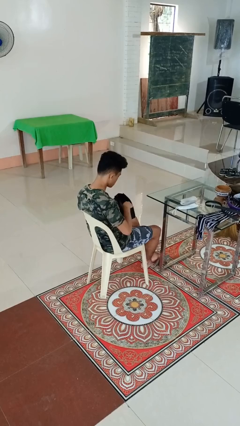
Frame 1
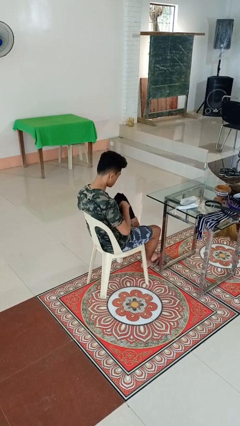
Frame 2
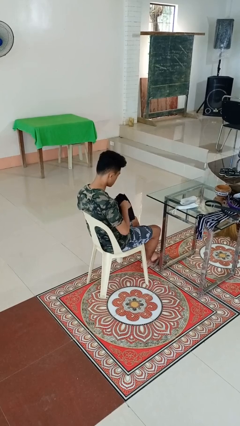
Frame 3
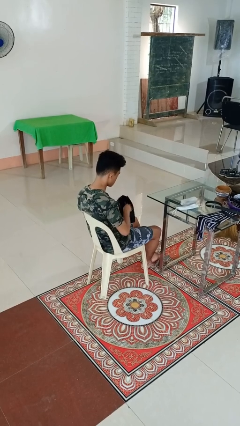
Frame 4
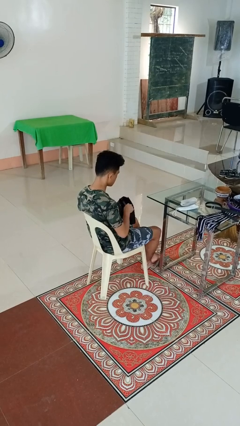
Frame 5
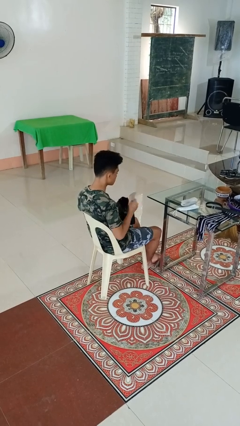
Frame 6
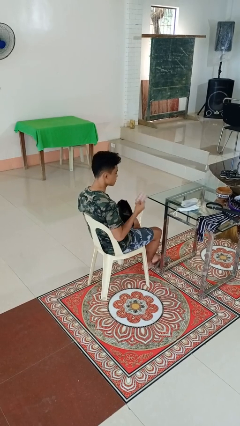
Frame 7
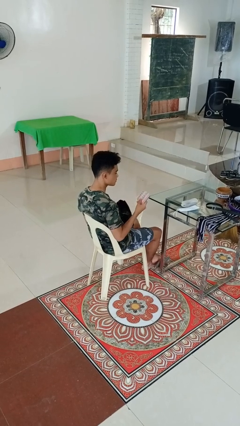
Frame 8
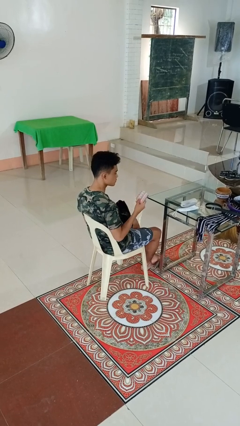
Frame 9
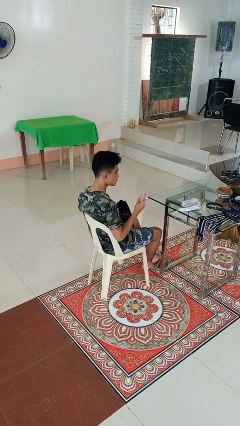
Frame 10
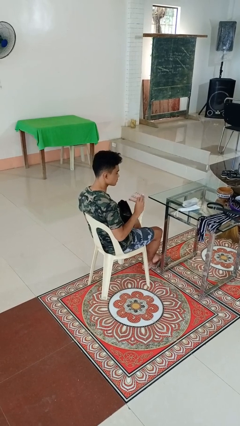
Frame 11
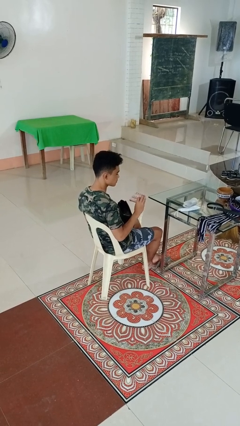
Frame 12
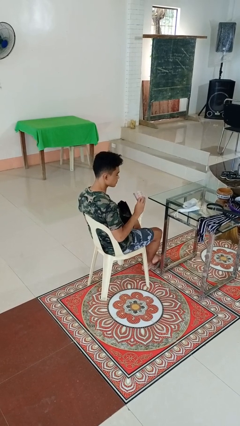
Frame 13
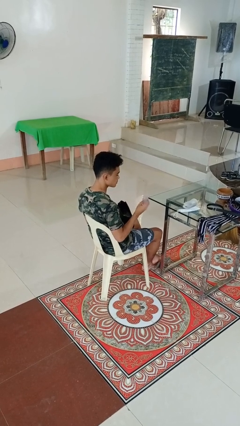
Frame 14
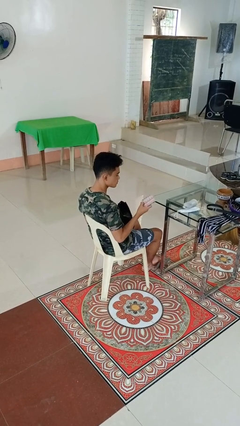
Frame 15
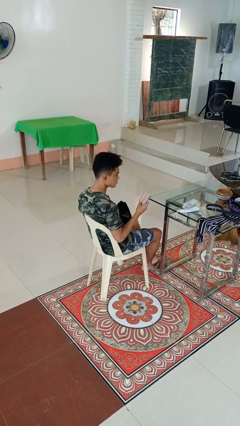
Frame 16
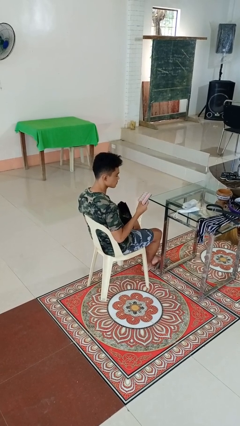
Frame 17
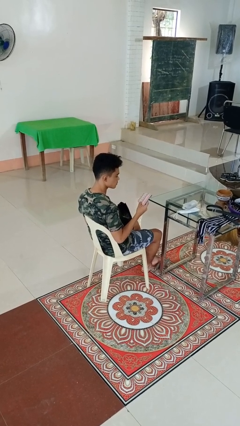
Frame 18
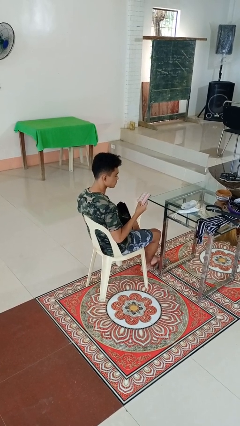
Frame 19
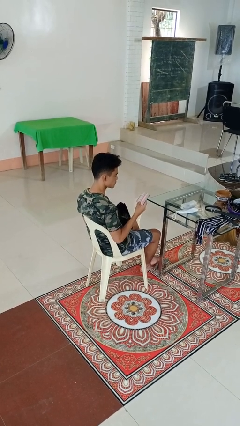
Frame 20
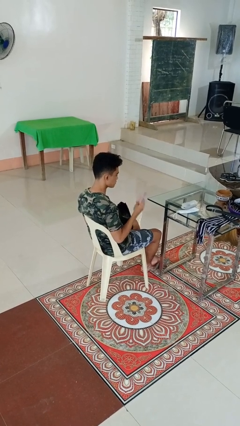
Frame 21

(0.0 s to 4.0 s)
person takes object from purse

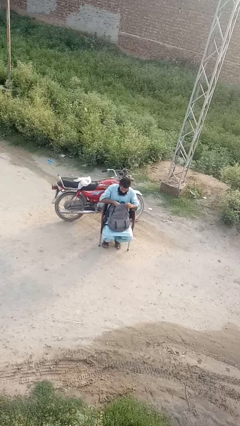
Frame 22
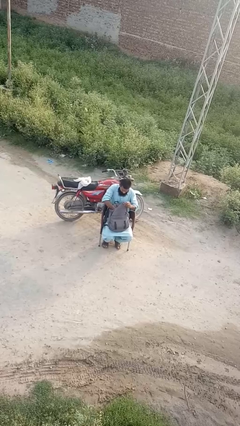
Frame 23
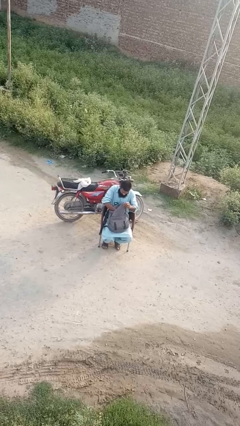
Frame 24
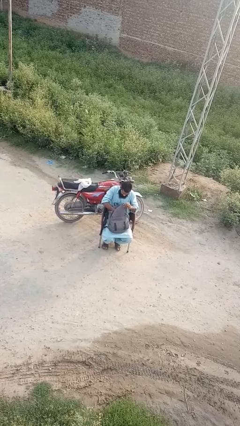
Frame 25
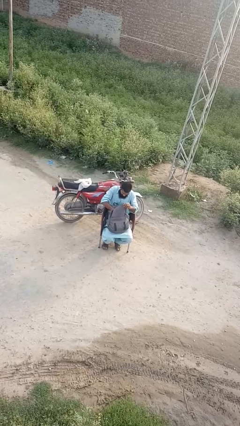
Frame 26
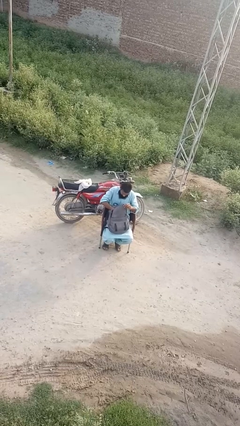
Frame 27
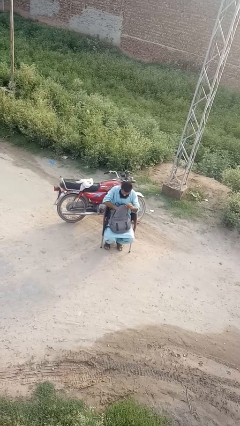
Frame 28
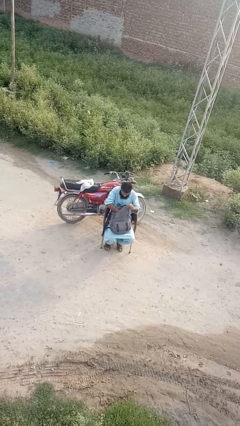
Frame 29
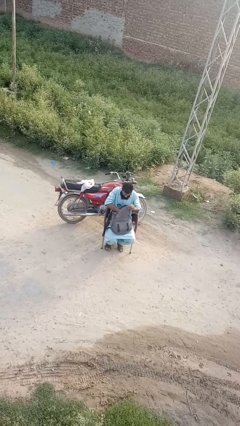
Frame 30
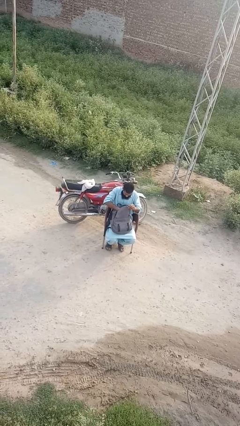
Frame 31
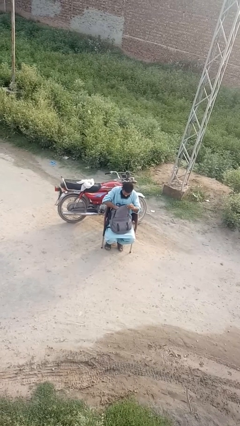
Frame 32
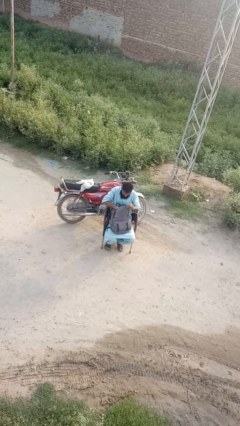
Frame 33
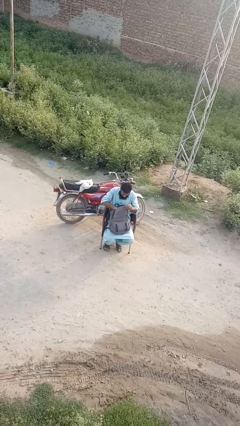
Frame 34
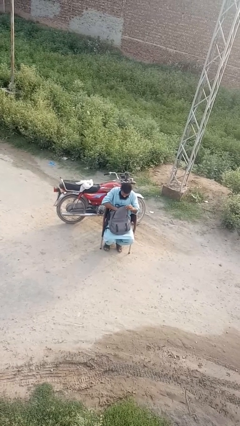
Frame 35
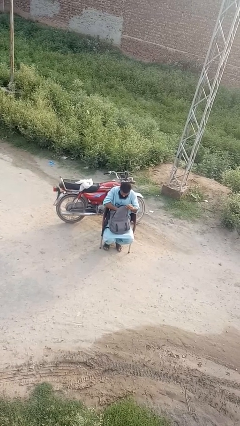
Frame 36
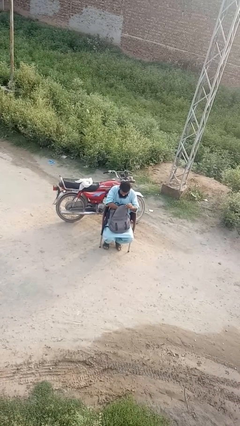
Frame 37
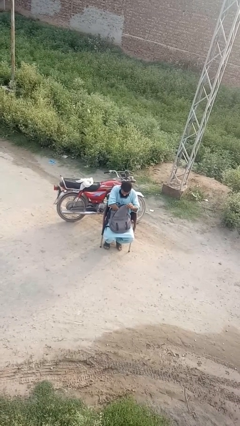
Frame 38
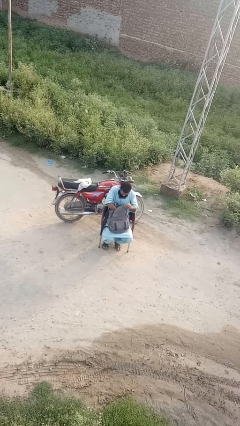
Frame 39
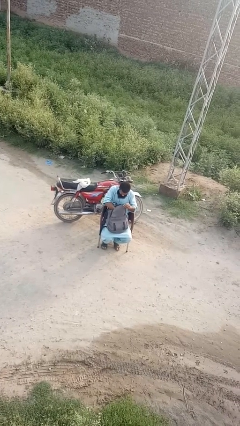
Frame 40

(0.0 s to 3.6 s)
person searches in backpack

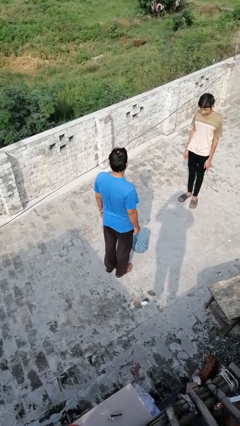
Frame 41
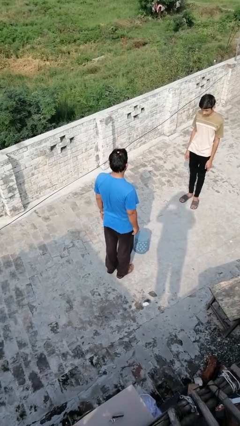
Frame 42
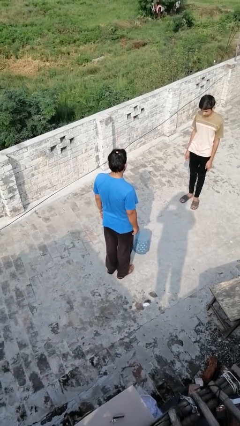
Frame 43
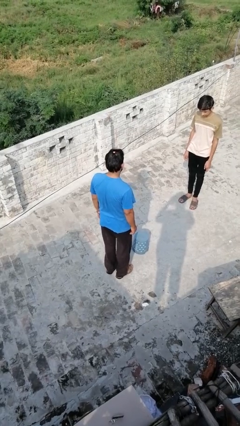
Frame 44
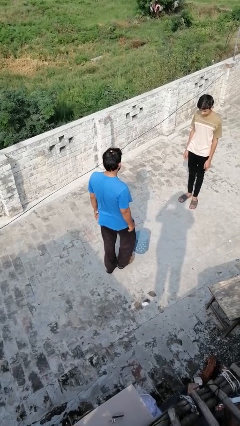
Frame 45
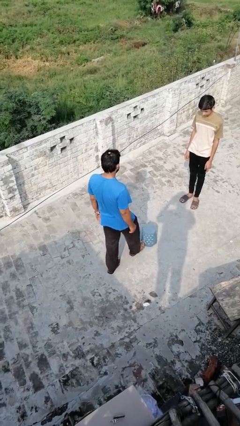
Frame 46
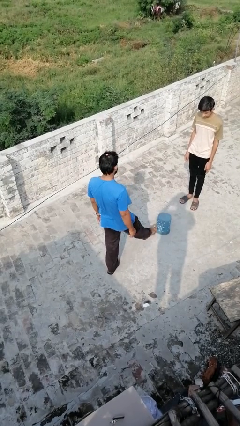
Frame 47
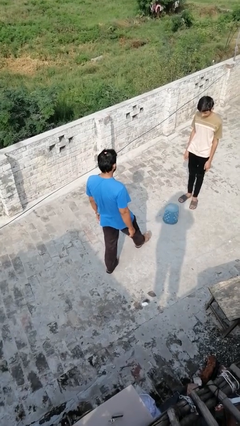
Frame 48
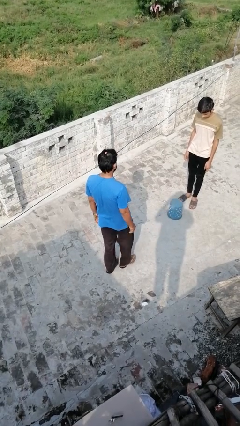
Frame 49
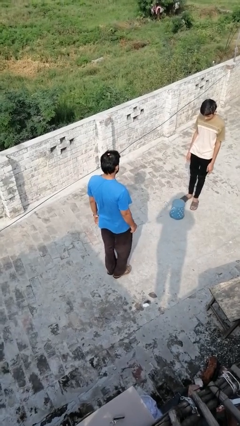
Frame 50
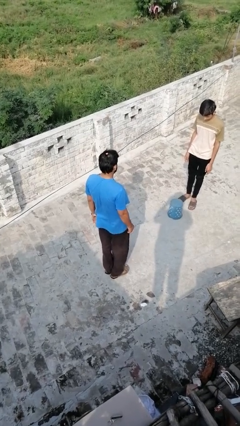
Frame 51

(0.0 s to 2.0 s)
person kicks object to person

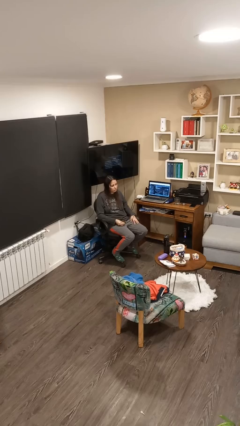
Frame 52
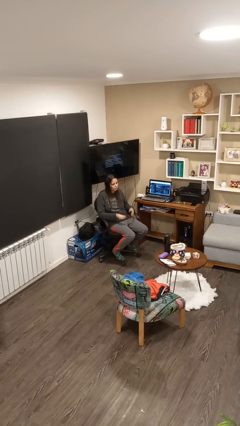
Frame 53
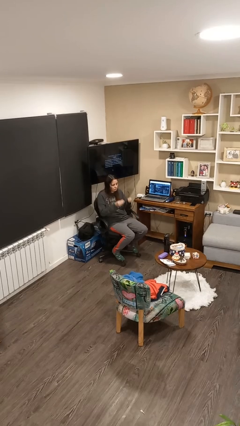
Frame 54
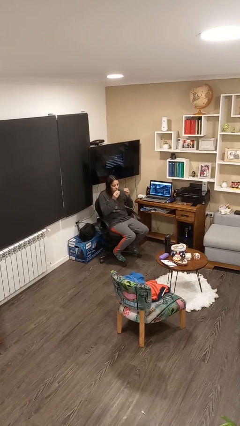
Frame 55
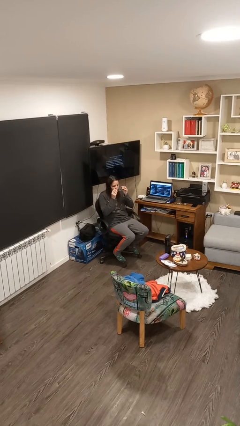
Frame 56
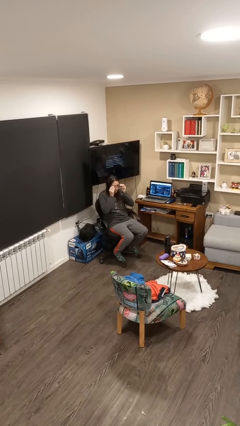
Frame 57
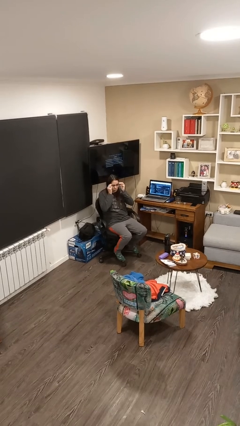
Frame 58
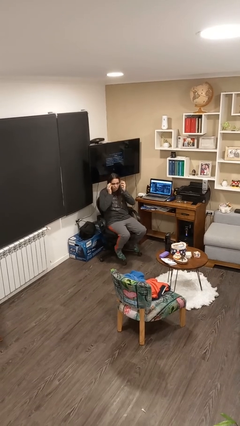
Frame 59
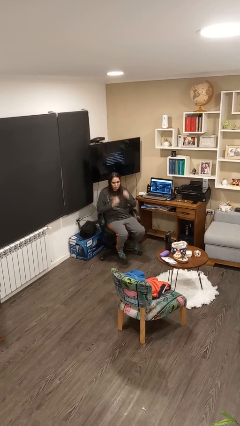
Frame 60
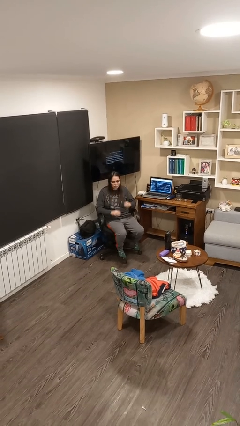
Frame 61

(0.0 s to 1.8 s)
person puts on glasses

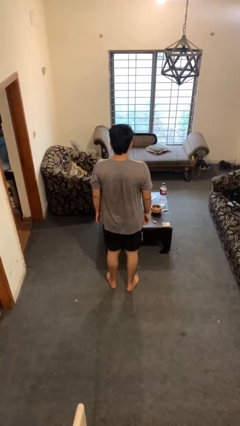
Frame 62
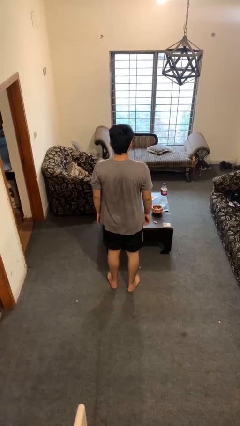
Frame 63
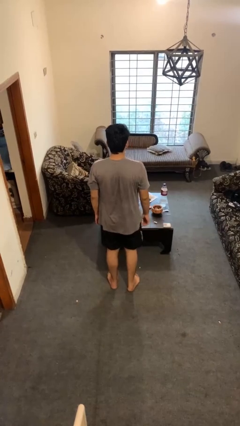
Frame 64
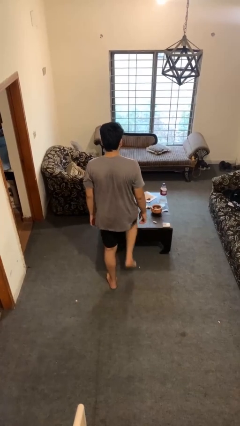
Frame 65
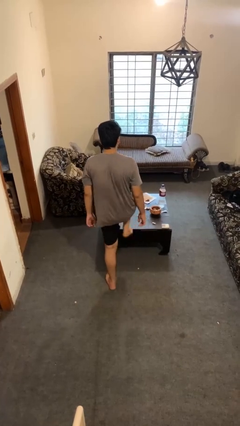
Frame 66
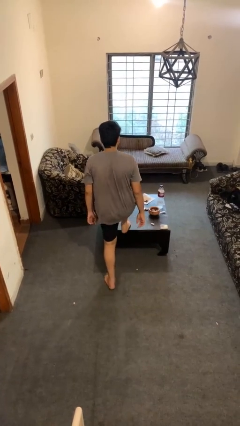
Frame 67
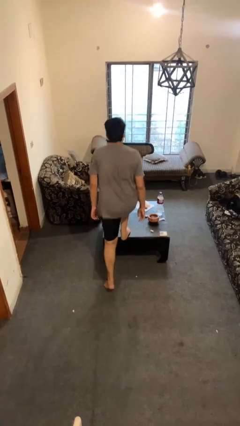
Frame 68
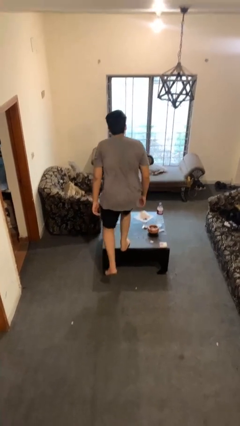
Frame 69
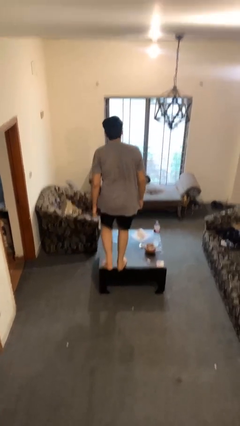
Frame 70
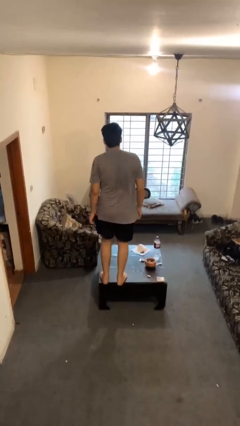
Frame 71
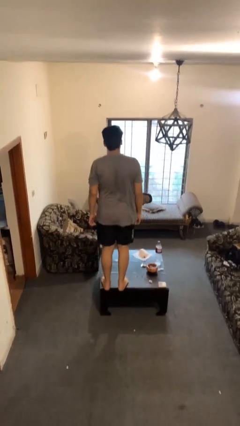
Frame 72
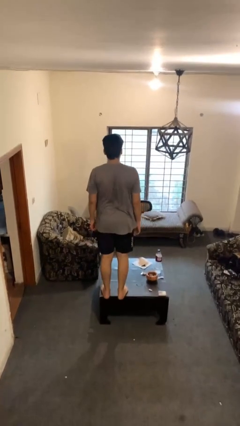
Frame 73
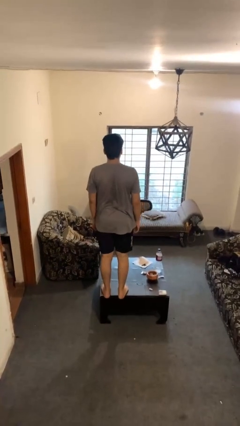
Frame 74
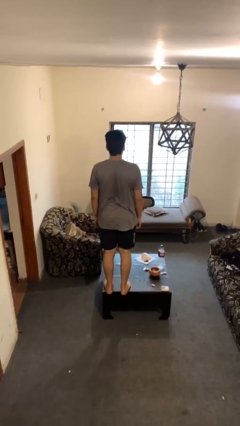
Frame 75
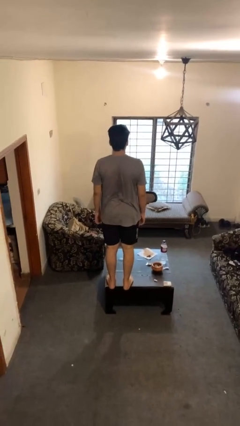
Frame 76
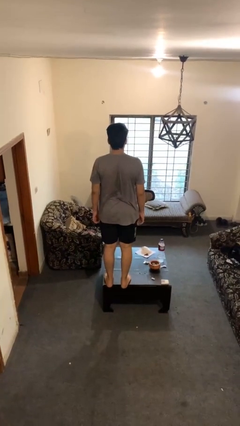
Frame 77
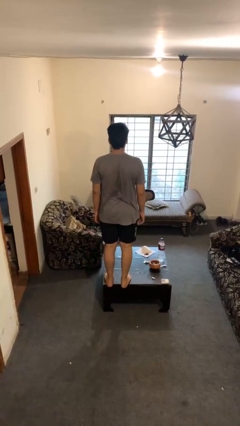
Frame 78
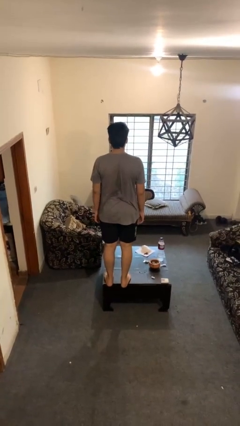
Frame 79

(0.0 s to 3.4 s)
person climbs on table

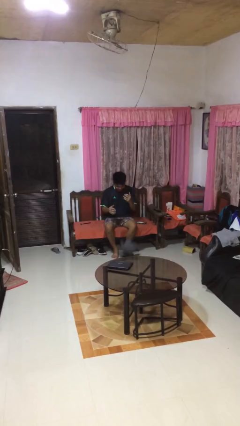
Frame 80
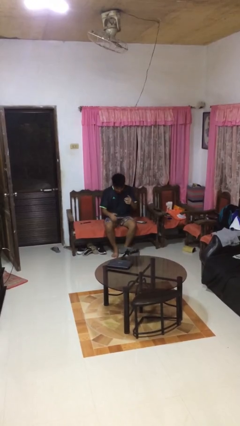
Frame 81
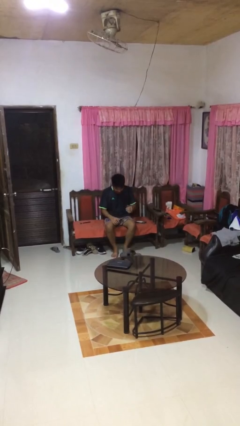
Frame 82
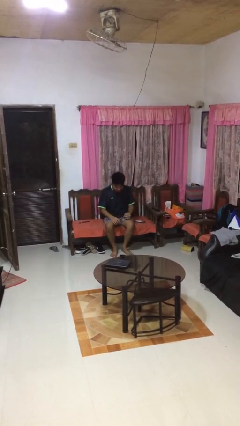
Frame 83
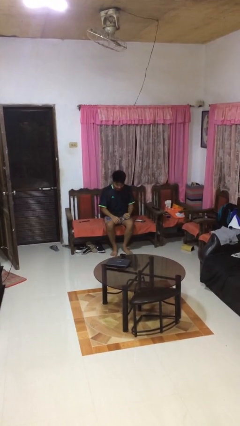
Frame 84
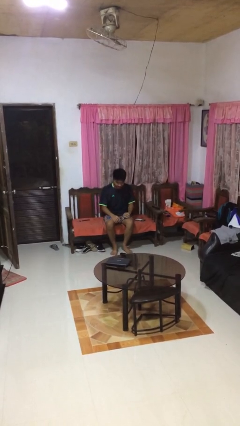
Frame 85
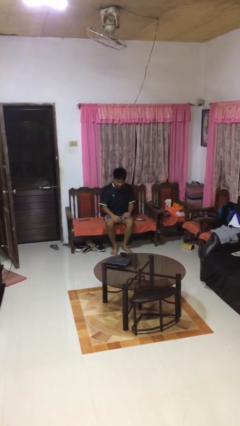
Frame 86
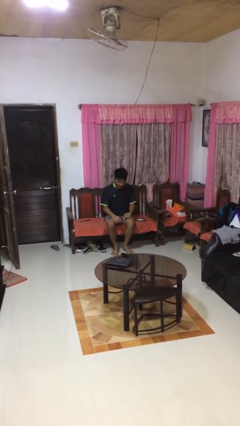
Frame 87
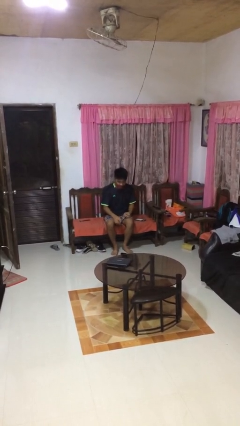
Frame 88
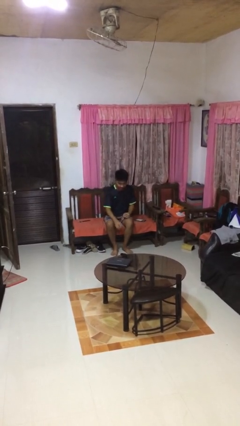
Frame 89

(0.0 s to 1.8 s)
person drops object

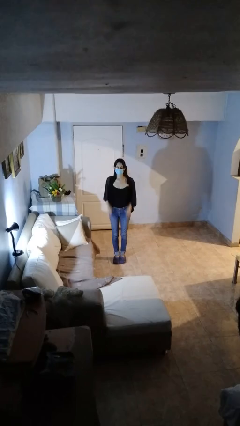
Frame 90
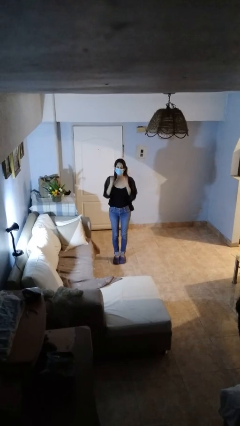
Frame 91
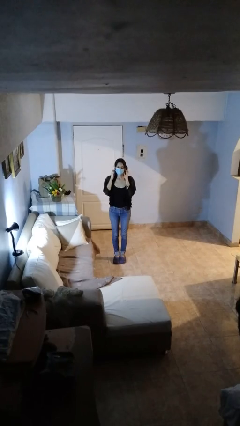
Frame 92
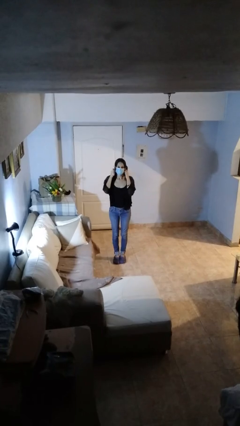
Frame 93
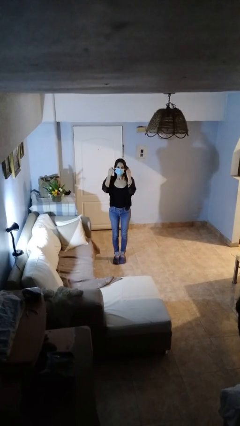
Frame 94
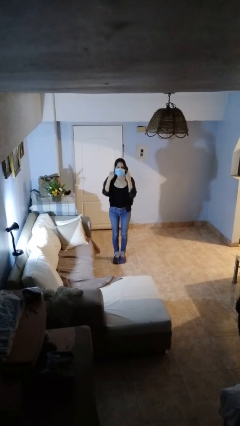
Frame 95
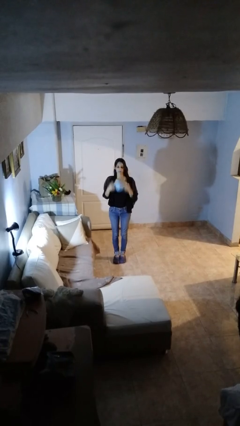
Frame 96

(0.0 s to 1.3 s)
person takes off facemask
